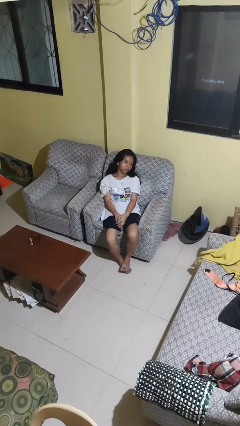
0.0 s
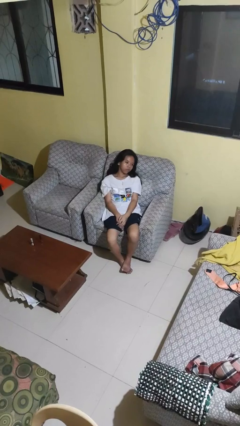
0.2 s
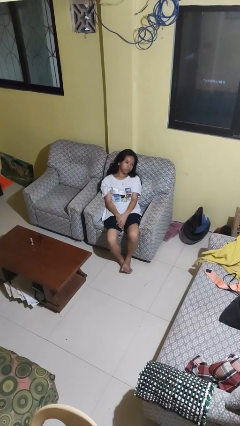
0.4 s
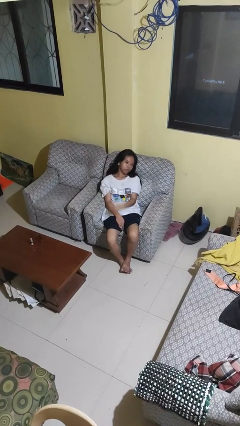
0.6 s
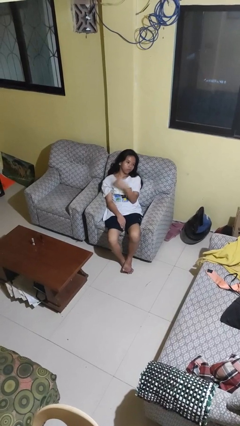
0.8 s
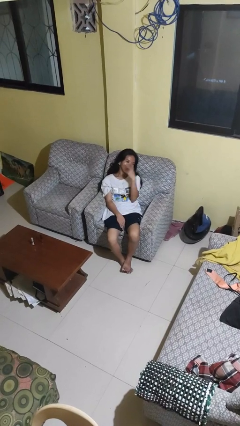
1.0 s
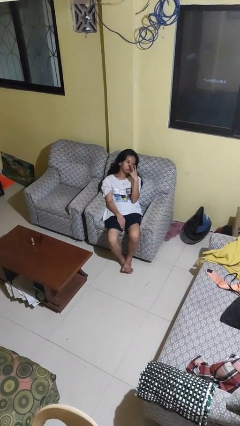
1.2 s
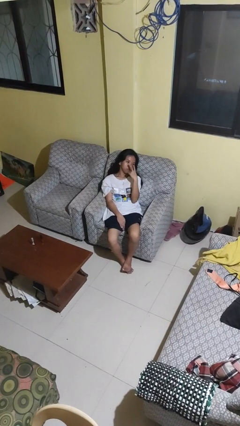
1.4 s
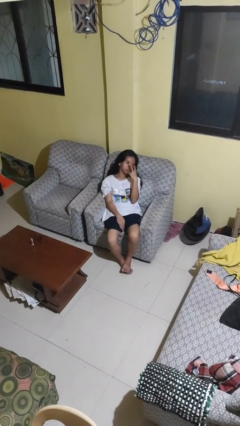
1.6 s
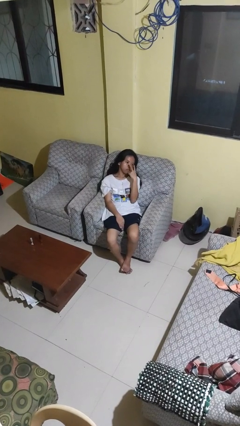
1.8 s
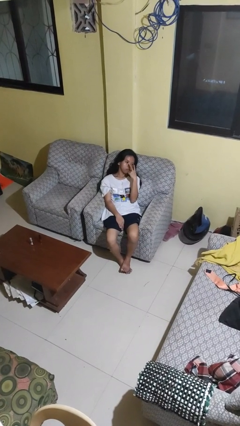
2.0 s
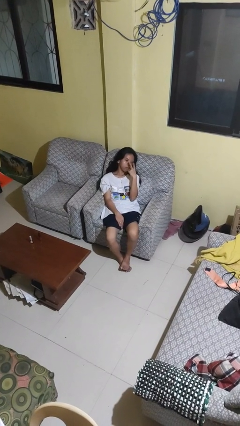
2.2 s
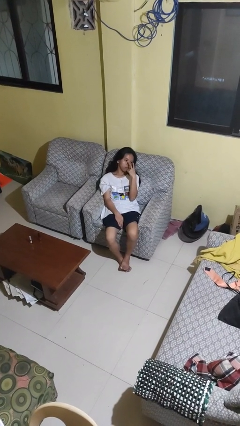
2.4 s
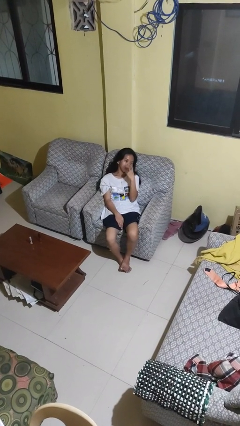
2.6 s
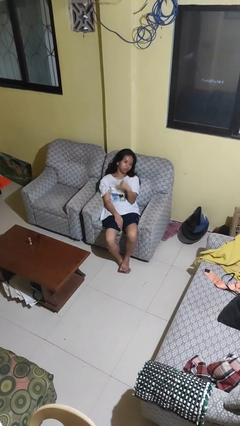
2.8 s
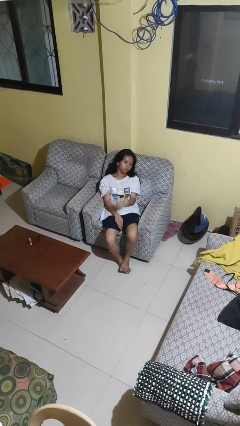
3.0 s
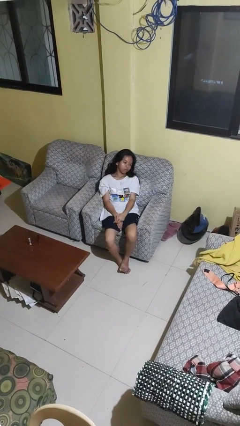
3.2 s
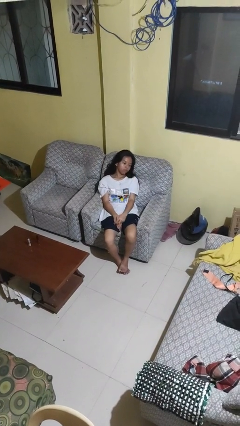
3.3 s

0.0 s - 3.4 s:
person gestures watch closely

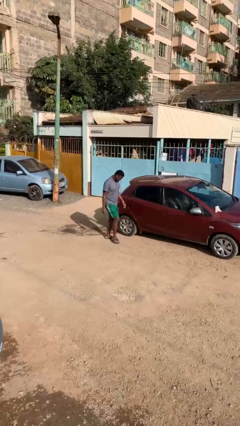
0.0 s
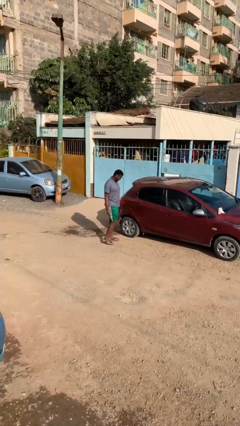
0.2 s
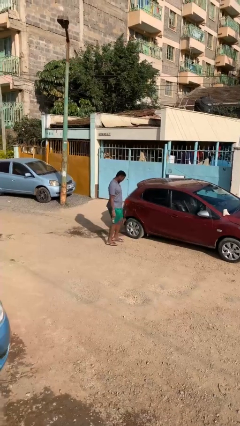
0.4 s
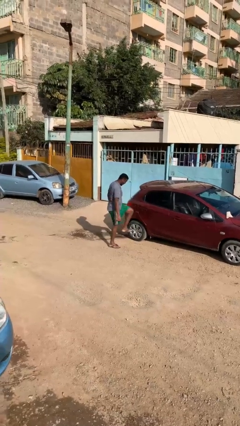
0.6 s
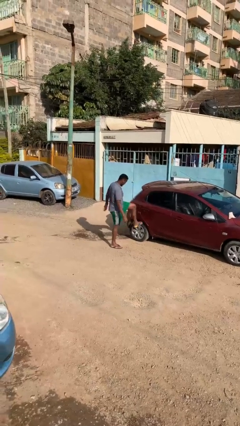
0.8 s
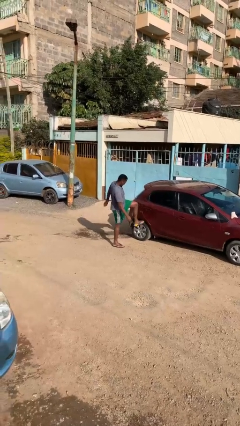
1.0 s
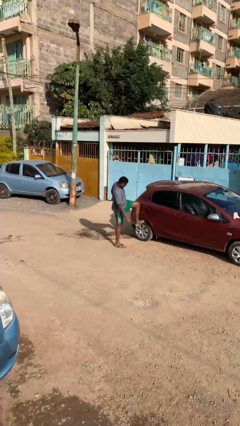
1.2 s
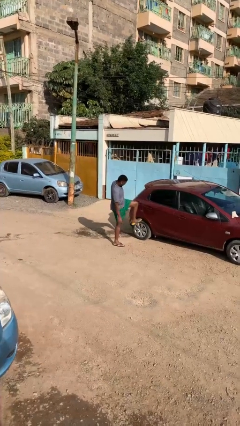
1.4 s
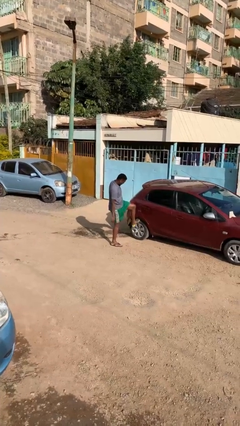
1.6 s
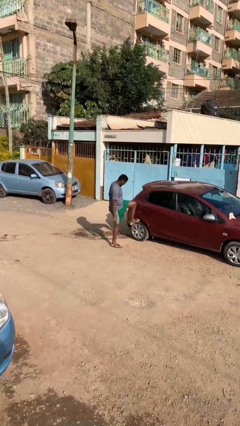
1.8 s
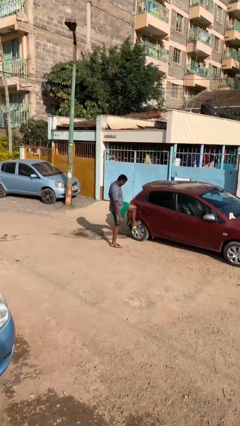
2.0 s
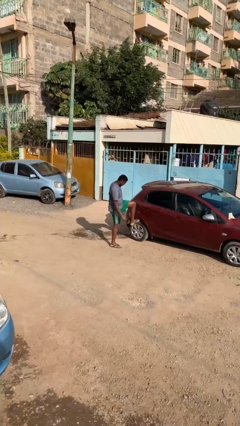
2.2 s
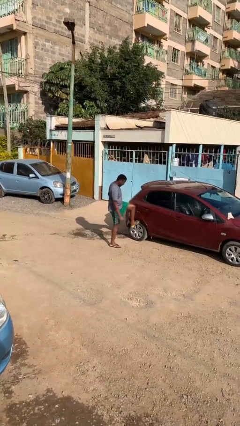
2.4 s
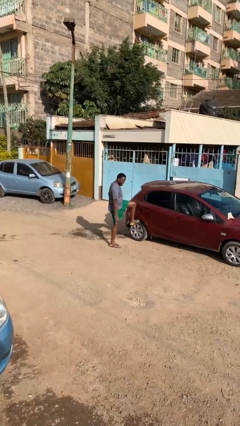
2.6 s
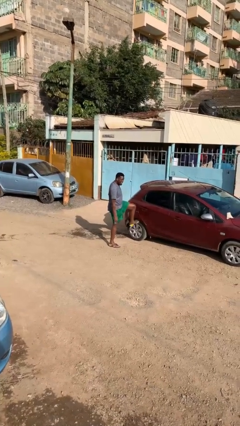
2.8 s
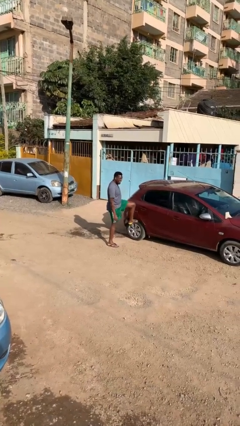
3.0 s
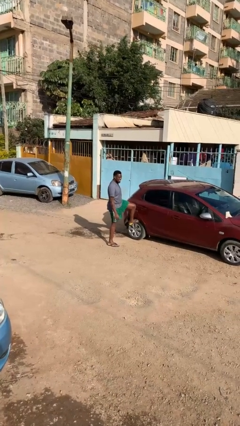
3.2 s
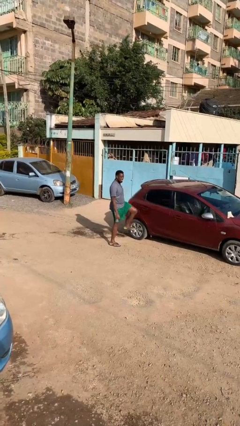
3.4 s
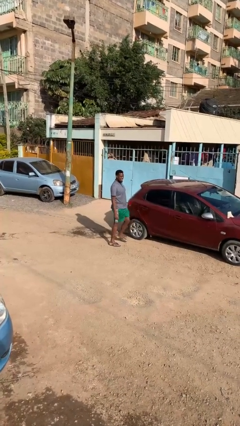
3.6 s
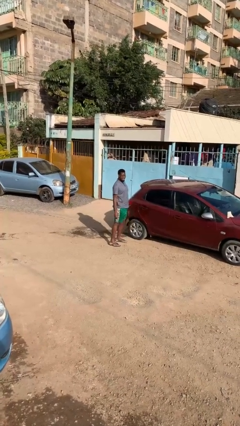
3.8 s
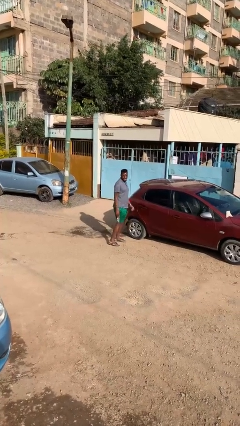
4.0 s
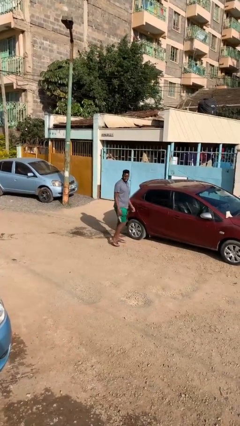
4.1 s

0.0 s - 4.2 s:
person kicks car tires

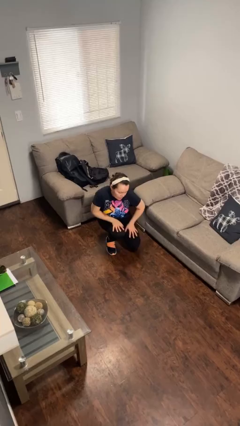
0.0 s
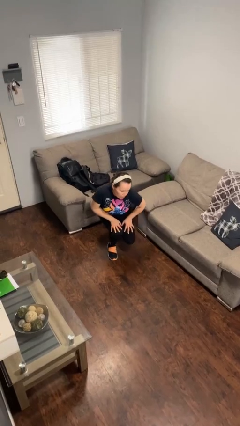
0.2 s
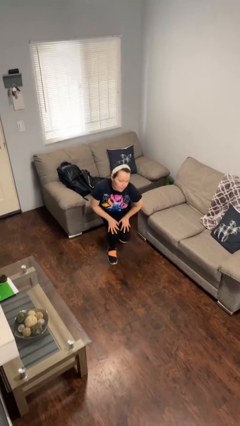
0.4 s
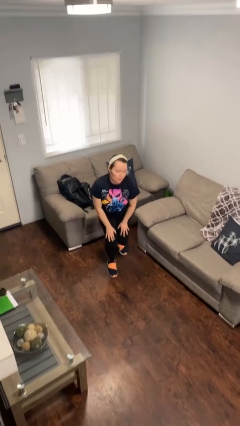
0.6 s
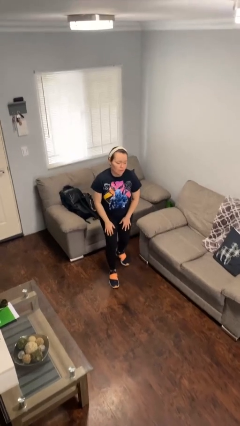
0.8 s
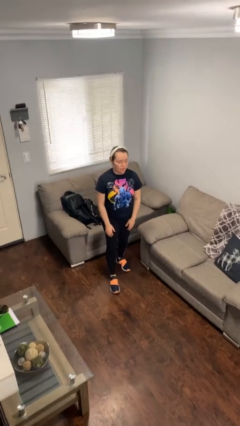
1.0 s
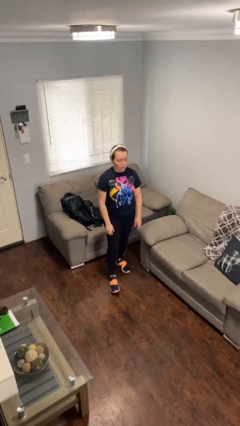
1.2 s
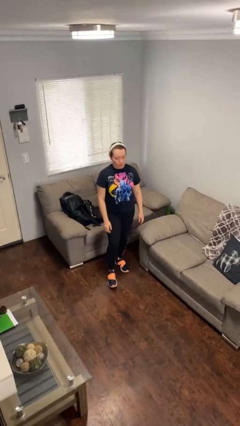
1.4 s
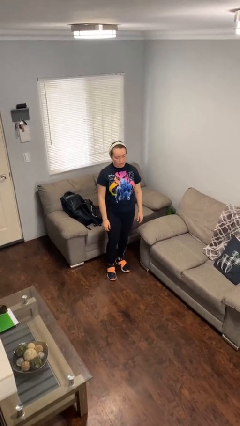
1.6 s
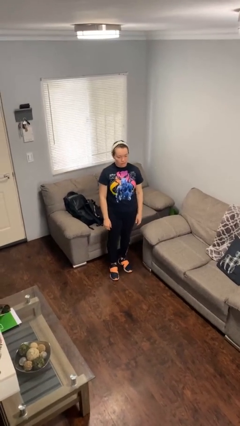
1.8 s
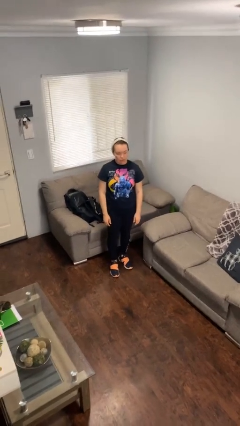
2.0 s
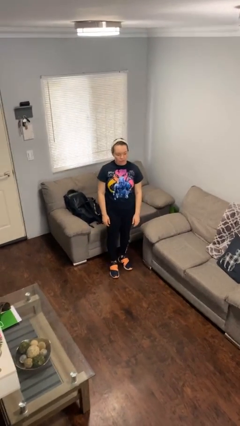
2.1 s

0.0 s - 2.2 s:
person stands up from floor

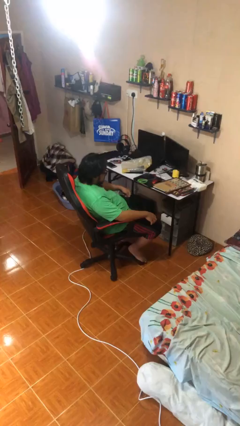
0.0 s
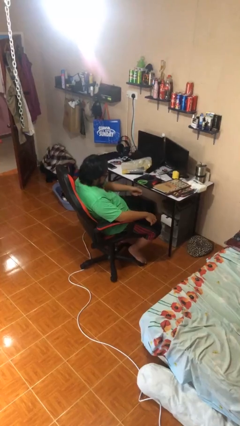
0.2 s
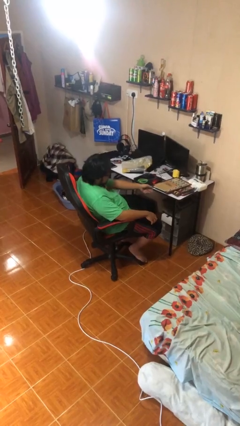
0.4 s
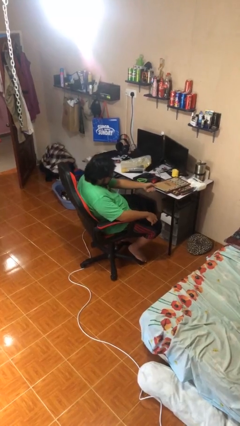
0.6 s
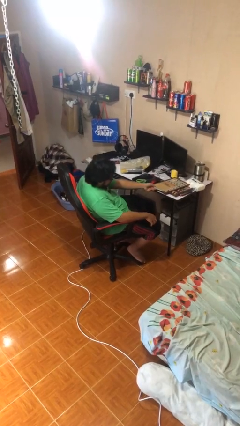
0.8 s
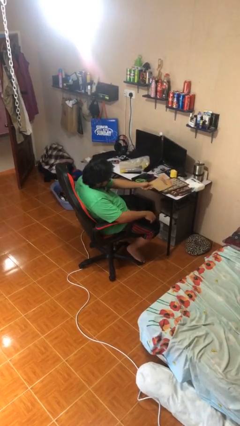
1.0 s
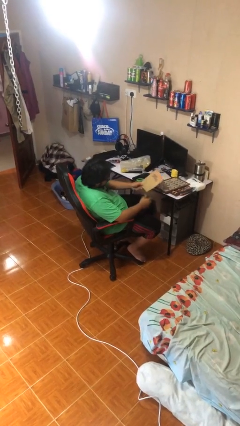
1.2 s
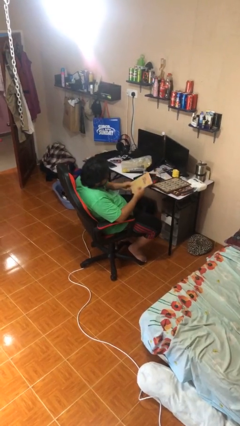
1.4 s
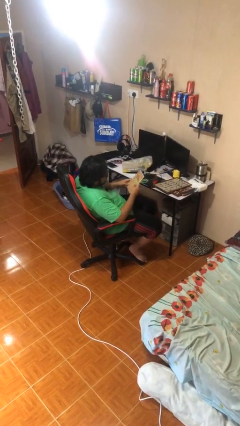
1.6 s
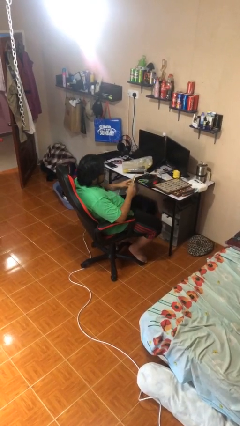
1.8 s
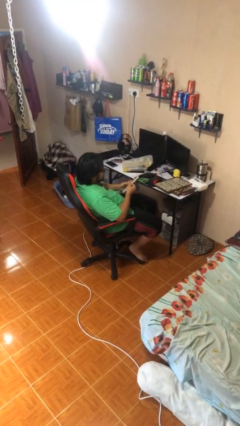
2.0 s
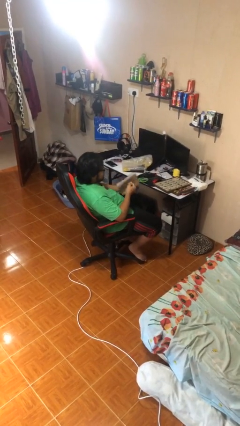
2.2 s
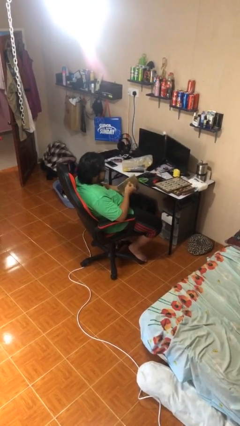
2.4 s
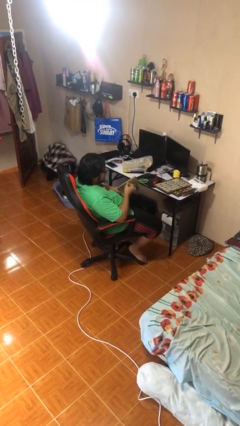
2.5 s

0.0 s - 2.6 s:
person picks up object from table

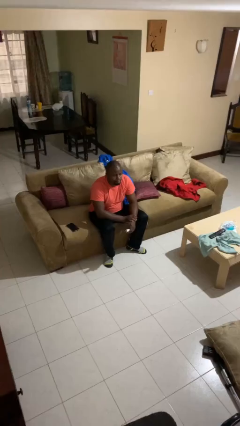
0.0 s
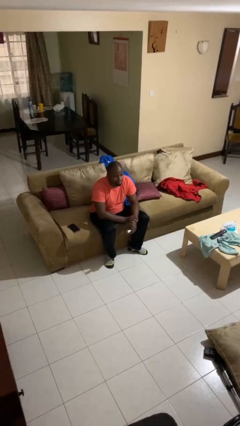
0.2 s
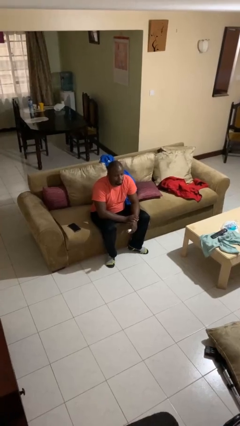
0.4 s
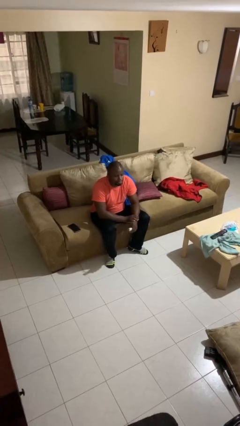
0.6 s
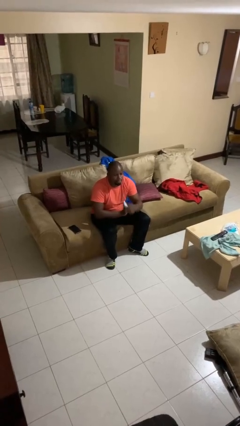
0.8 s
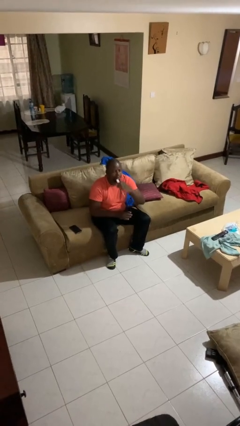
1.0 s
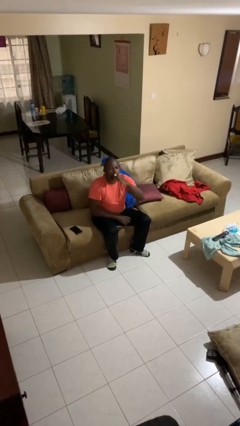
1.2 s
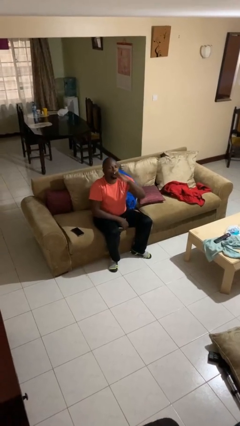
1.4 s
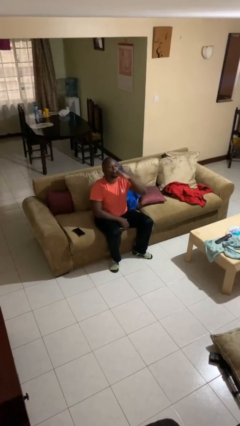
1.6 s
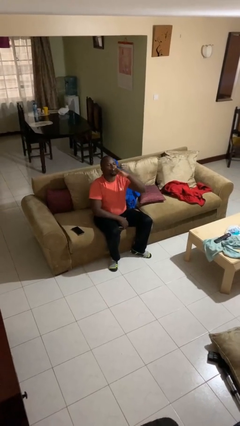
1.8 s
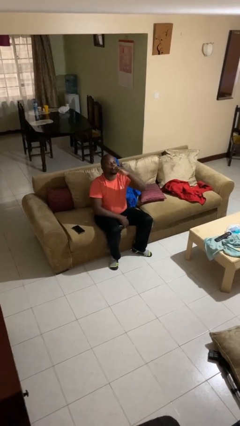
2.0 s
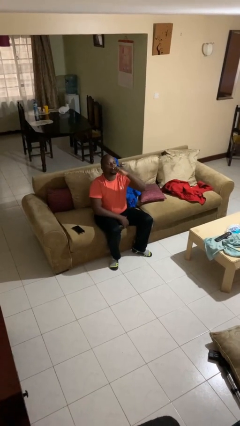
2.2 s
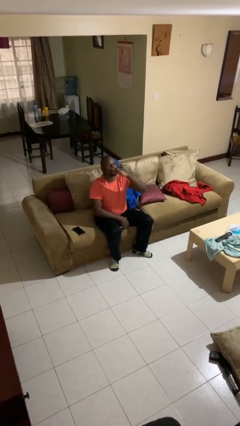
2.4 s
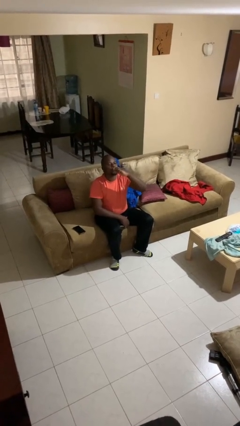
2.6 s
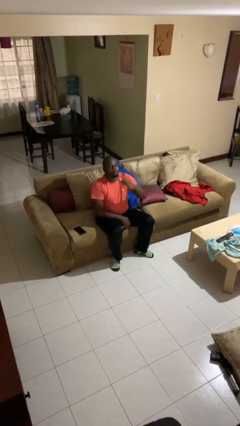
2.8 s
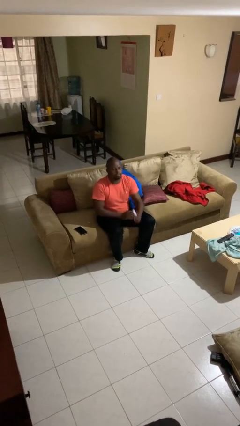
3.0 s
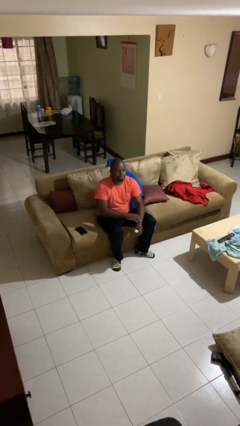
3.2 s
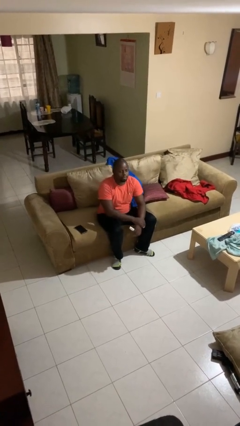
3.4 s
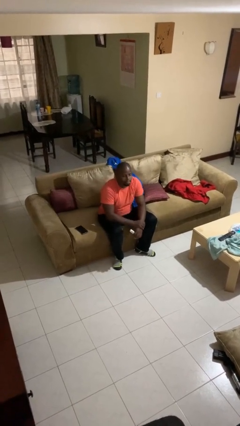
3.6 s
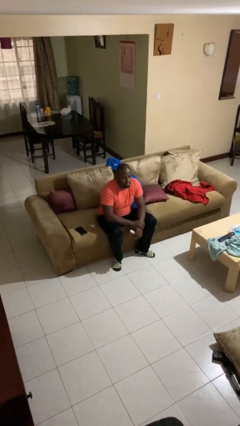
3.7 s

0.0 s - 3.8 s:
person vapes

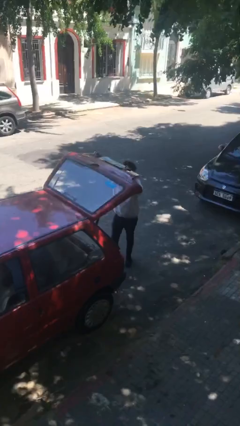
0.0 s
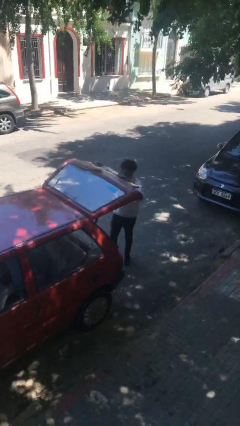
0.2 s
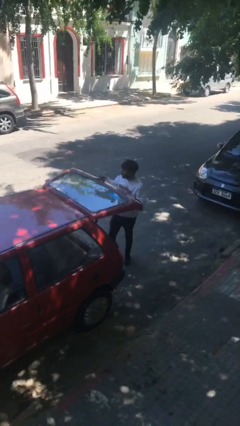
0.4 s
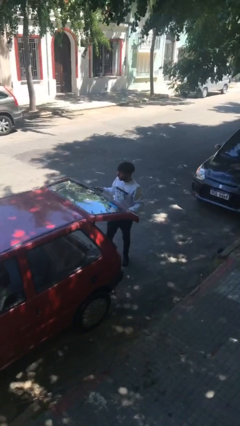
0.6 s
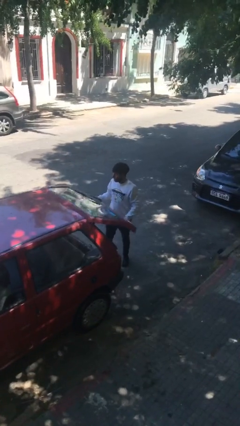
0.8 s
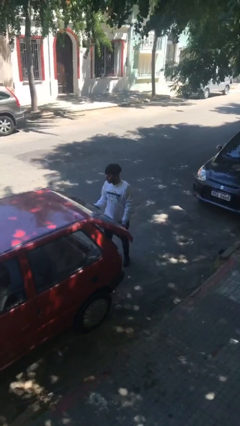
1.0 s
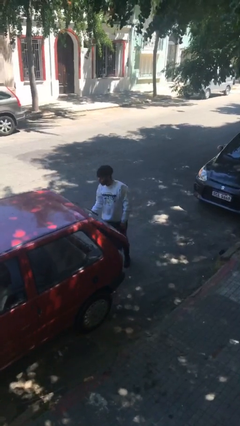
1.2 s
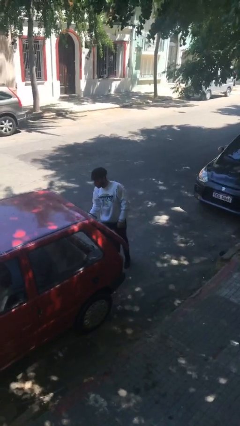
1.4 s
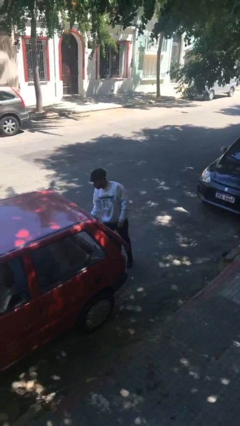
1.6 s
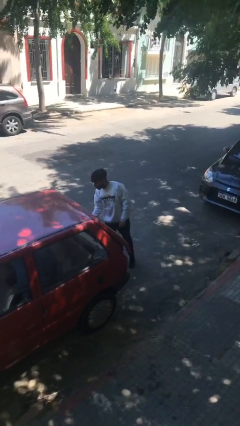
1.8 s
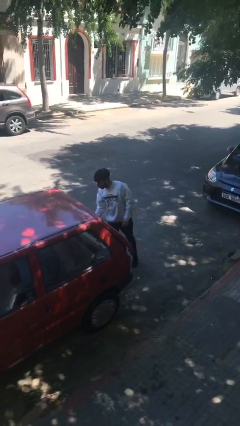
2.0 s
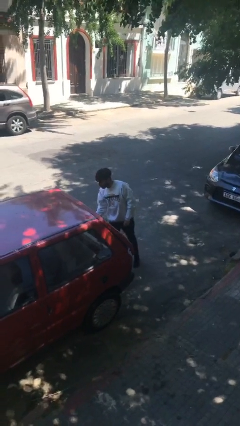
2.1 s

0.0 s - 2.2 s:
person closes car trunk
